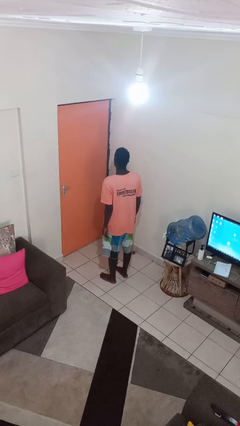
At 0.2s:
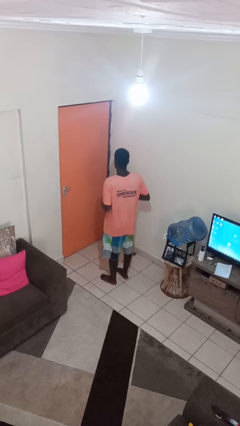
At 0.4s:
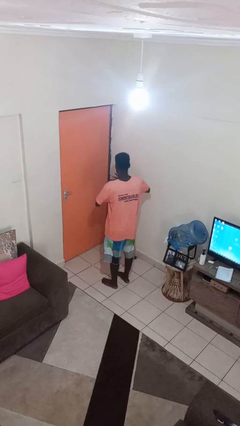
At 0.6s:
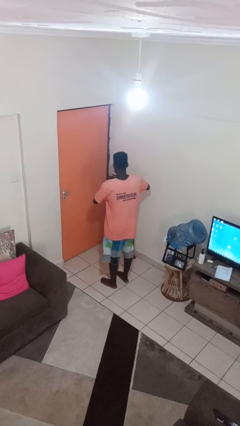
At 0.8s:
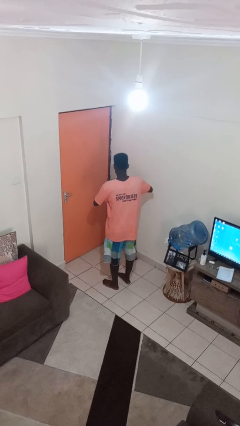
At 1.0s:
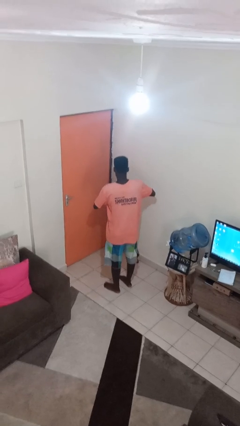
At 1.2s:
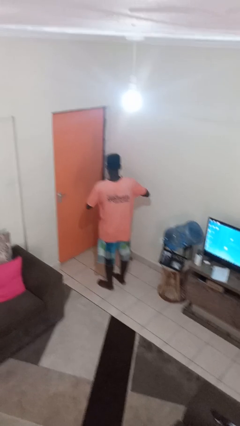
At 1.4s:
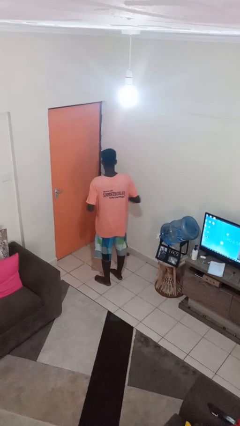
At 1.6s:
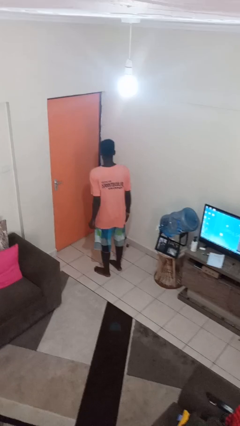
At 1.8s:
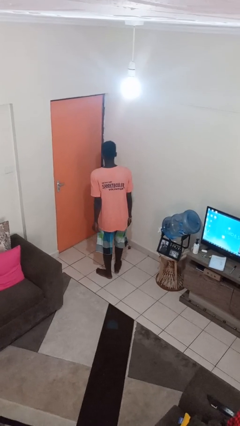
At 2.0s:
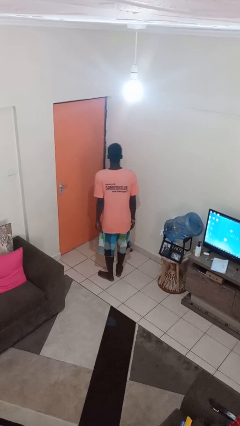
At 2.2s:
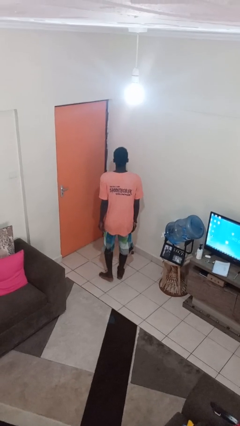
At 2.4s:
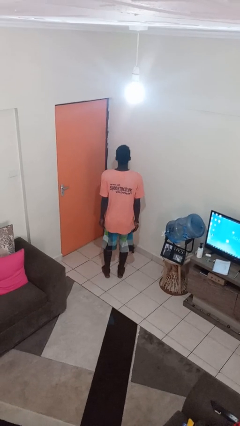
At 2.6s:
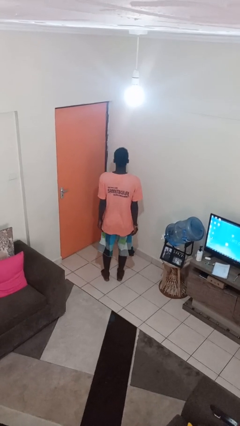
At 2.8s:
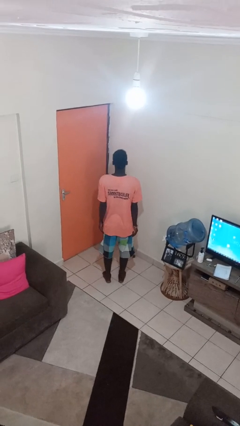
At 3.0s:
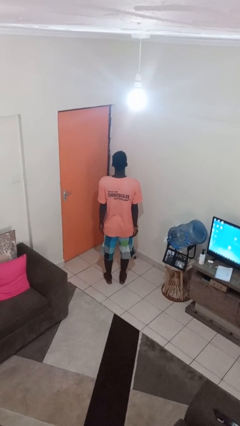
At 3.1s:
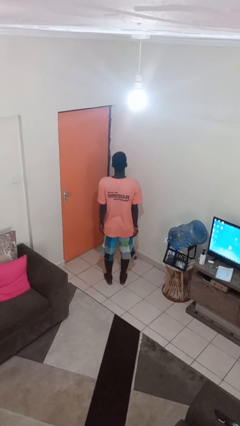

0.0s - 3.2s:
person takes off ring

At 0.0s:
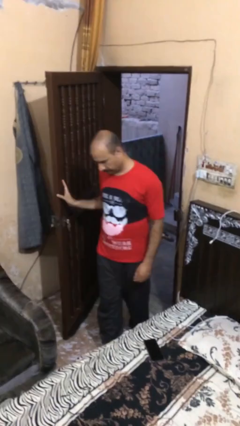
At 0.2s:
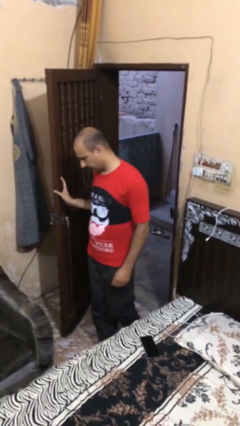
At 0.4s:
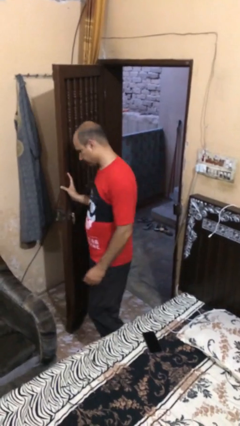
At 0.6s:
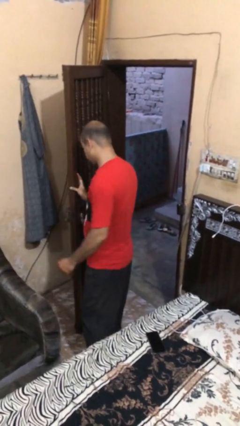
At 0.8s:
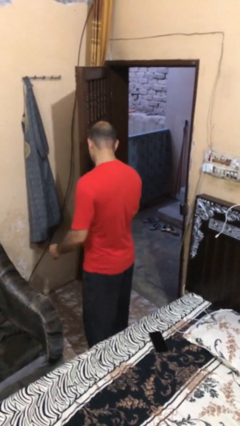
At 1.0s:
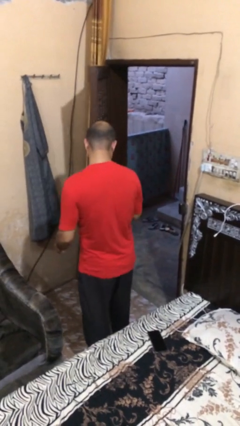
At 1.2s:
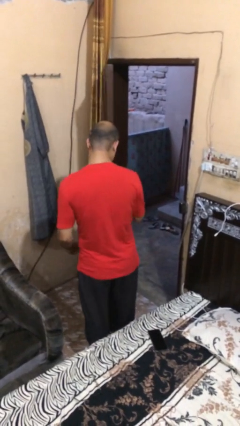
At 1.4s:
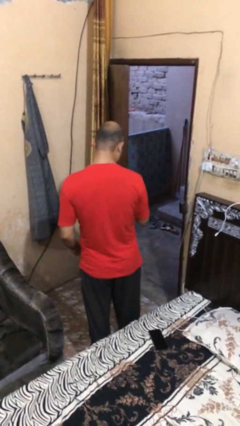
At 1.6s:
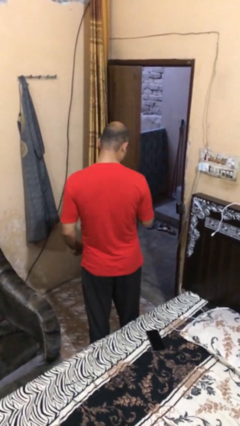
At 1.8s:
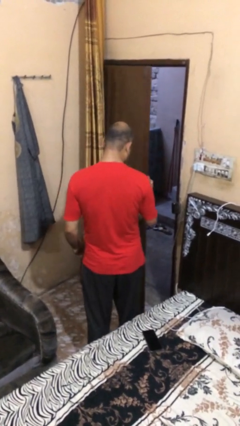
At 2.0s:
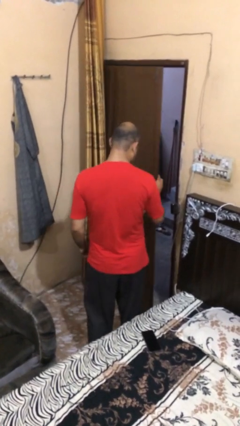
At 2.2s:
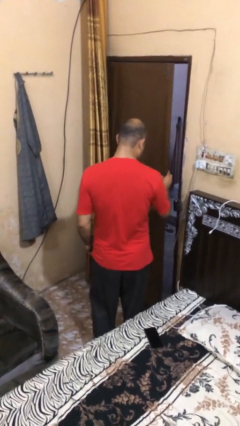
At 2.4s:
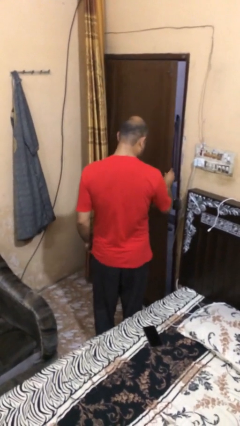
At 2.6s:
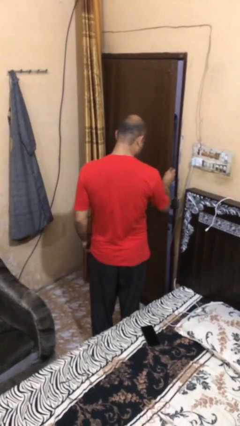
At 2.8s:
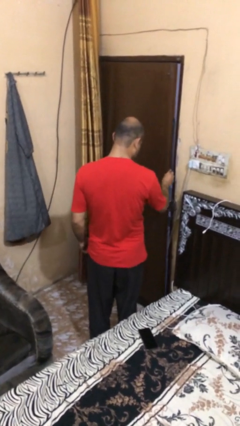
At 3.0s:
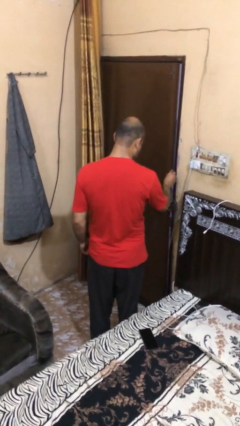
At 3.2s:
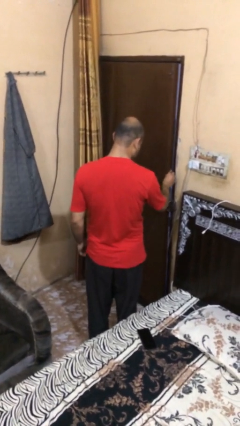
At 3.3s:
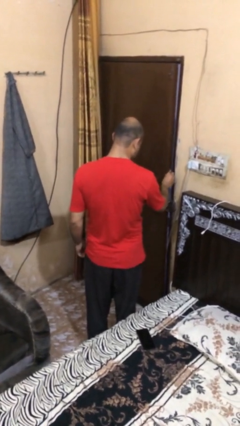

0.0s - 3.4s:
person closes facility door

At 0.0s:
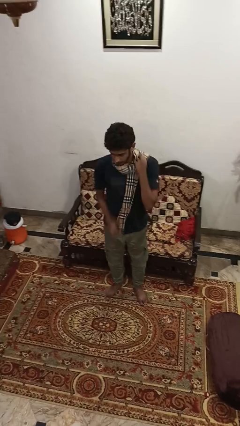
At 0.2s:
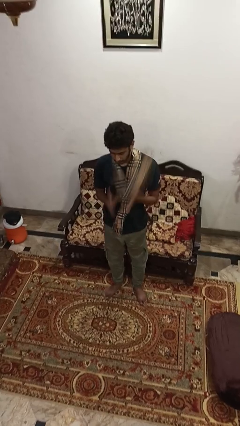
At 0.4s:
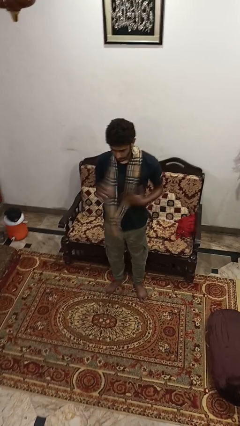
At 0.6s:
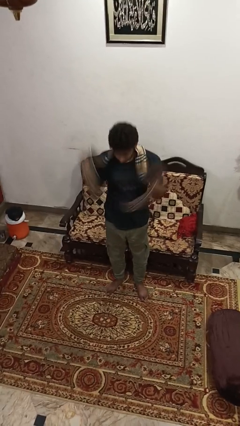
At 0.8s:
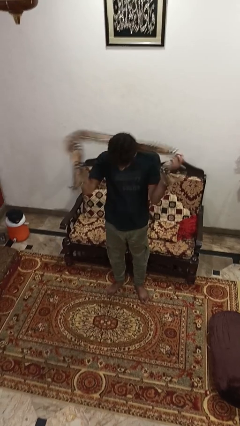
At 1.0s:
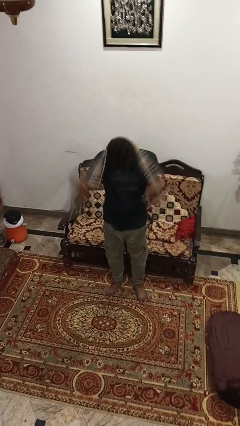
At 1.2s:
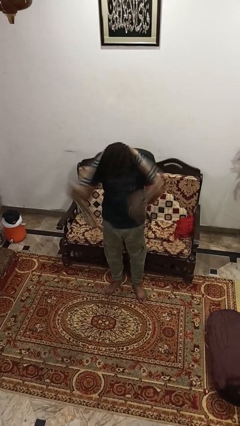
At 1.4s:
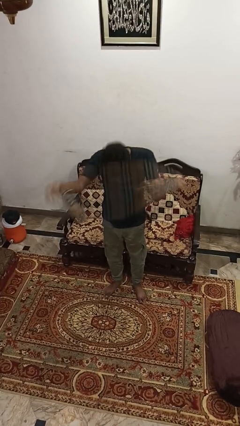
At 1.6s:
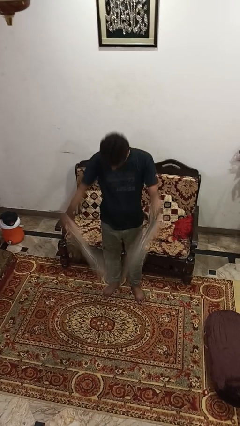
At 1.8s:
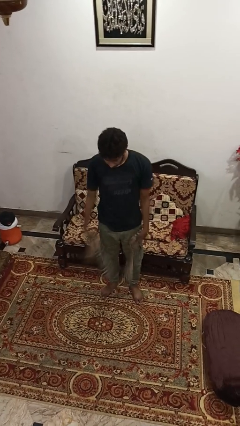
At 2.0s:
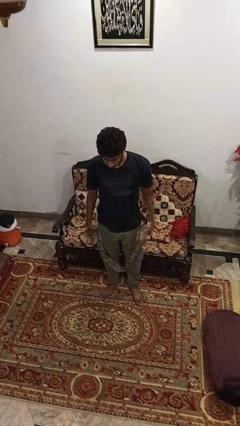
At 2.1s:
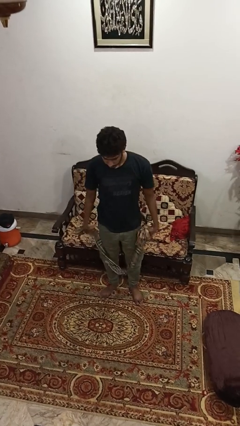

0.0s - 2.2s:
person takes off scarf

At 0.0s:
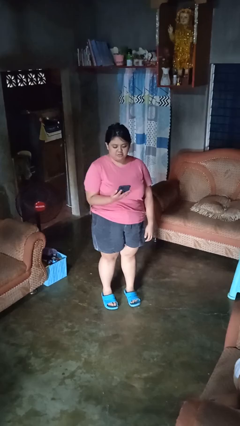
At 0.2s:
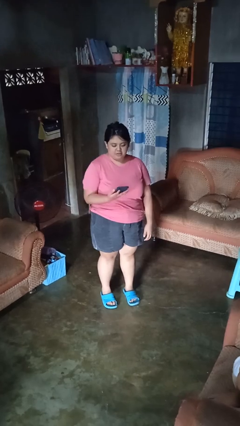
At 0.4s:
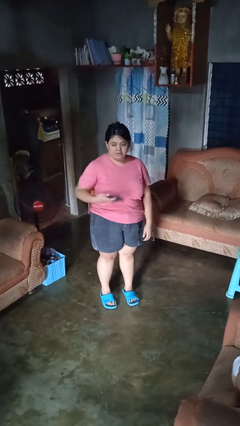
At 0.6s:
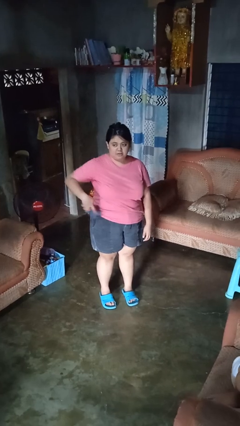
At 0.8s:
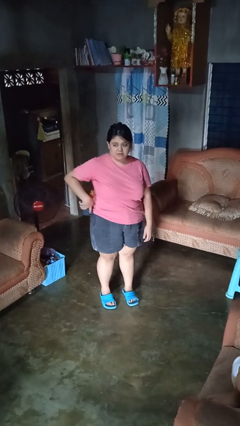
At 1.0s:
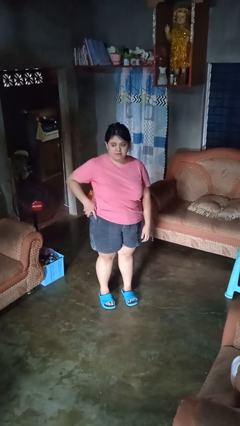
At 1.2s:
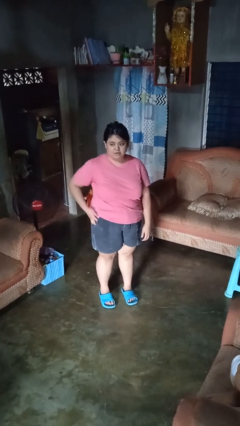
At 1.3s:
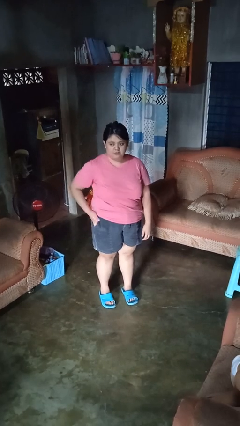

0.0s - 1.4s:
person puts phone into pocket

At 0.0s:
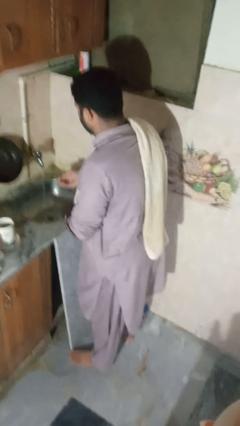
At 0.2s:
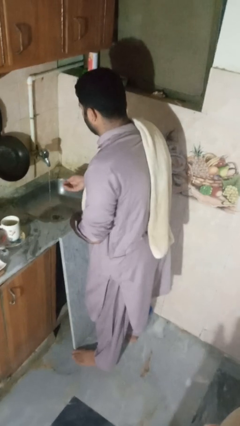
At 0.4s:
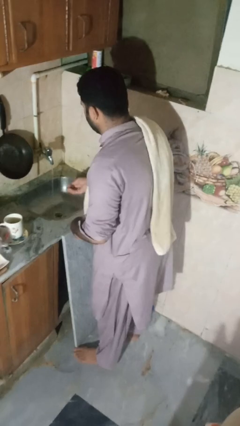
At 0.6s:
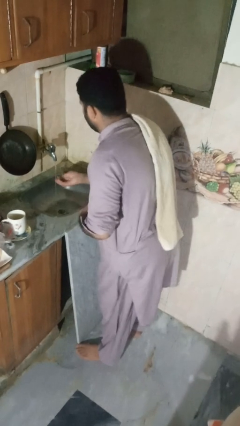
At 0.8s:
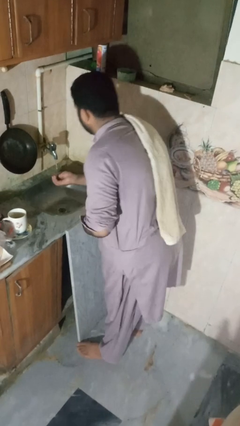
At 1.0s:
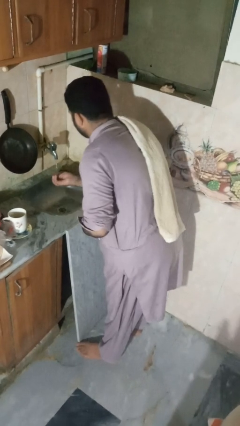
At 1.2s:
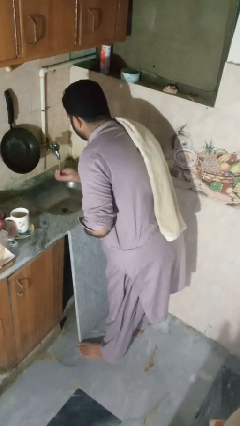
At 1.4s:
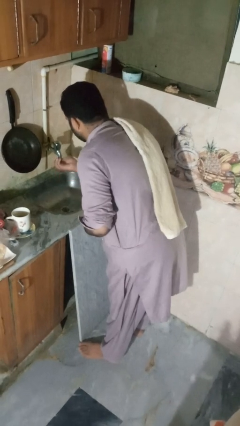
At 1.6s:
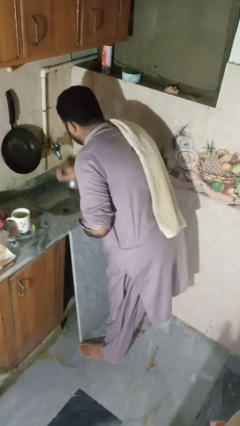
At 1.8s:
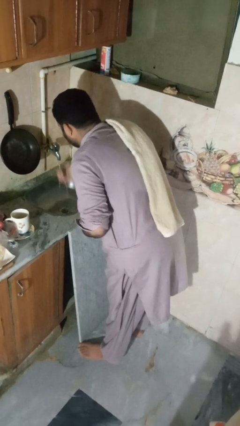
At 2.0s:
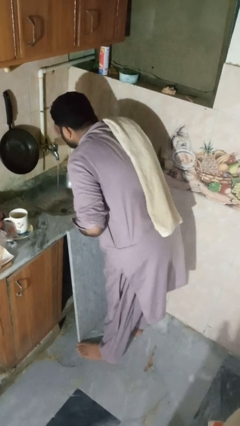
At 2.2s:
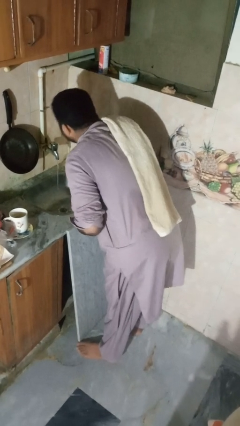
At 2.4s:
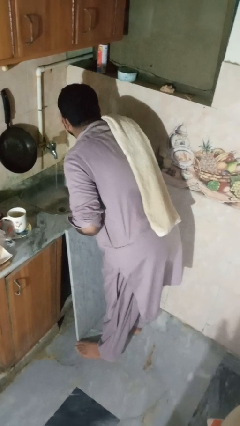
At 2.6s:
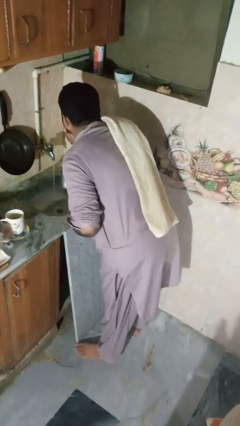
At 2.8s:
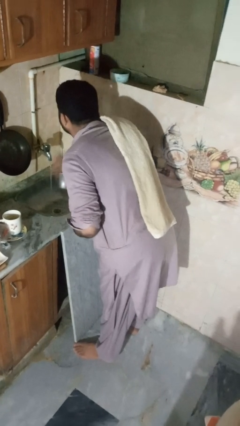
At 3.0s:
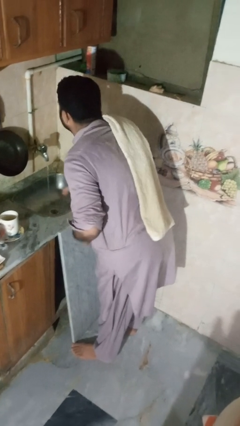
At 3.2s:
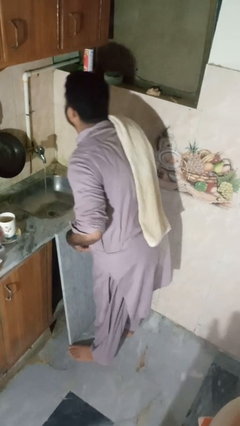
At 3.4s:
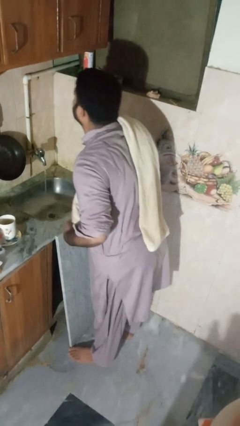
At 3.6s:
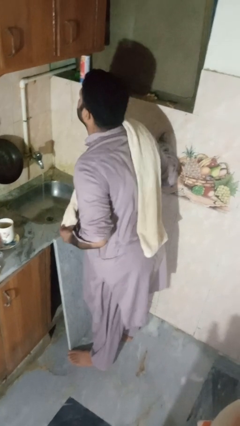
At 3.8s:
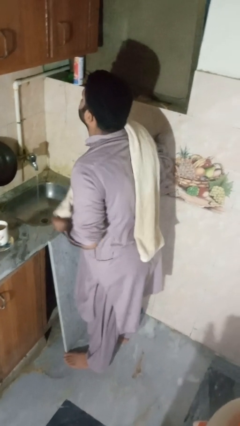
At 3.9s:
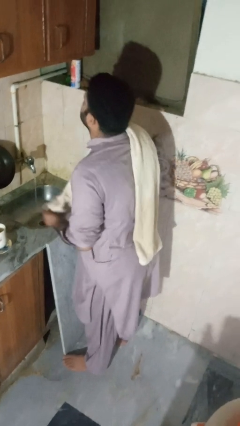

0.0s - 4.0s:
person washes face

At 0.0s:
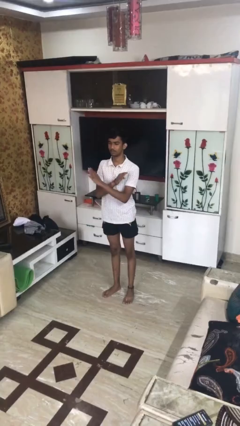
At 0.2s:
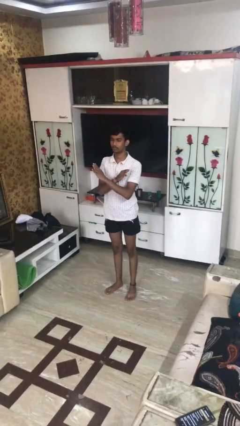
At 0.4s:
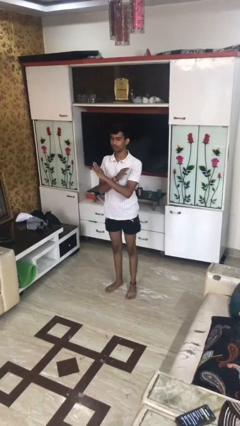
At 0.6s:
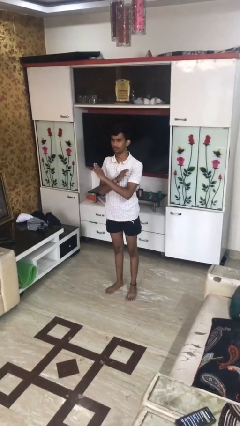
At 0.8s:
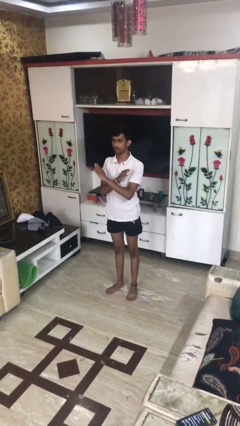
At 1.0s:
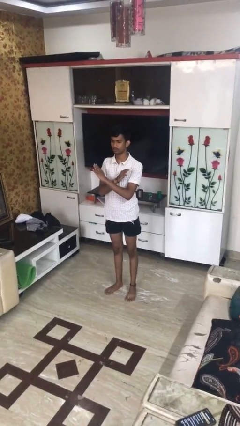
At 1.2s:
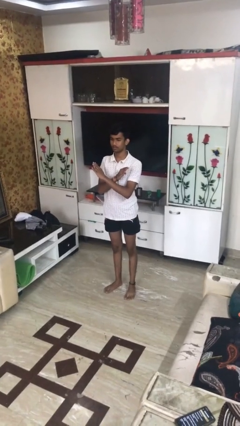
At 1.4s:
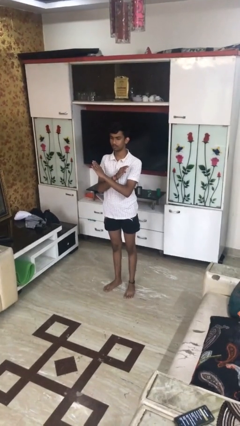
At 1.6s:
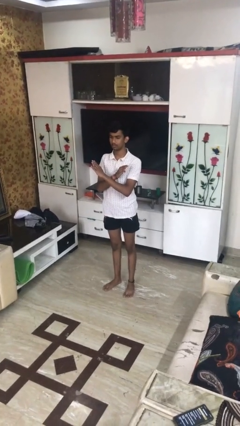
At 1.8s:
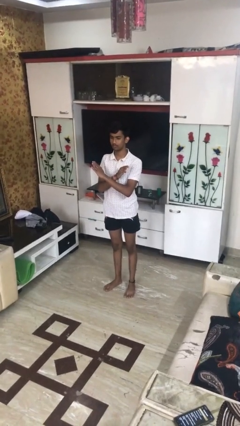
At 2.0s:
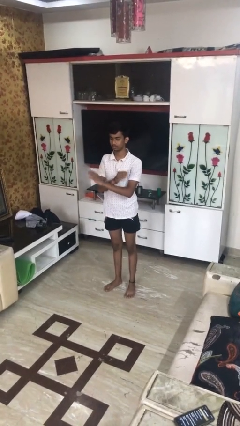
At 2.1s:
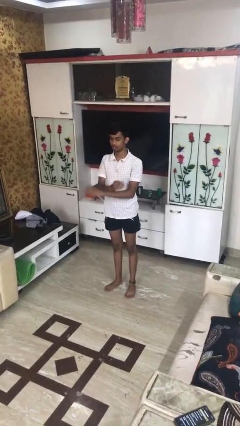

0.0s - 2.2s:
person gestures arms x

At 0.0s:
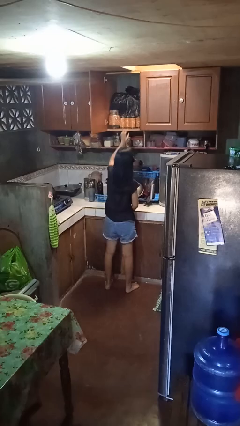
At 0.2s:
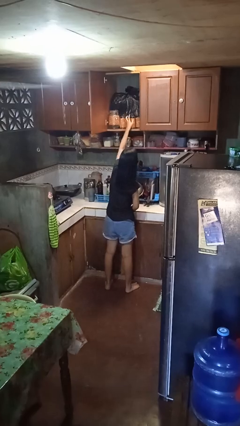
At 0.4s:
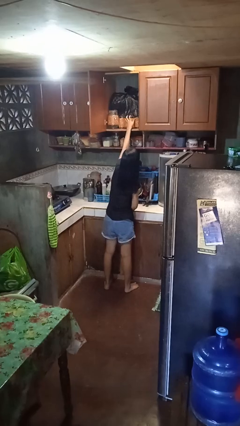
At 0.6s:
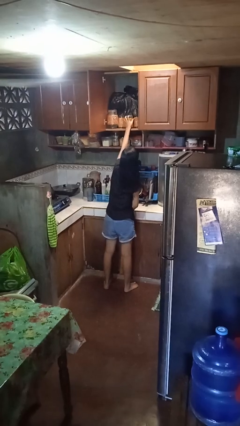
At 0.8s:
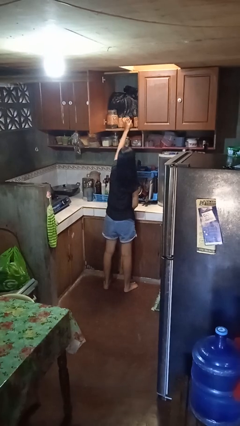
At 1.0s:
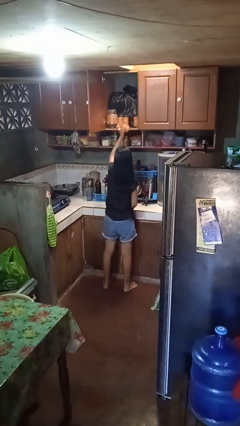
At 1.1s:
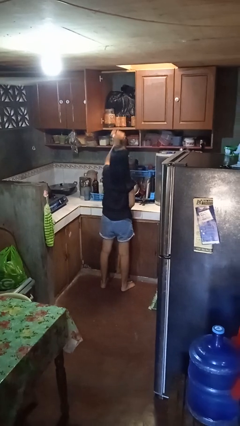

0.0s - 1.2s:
person picks up object from cabinet
